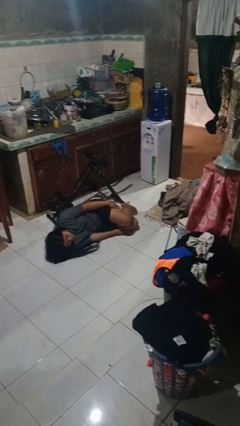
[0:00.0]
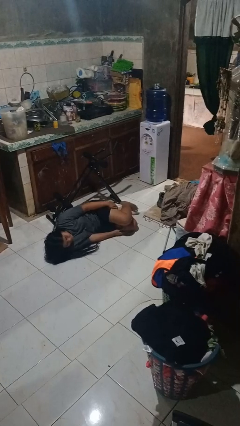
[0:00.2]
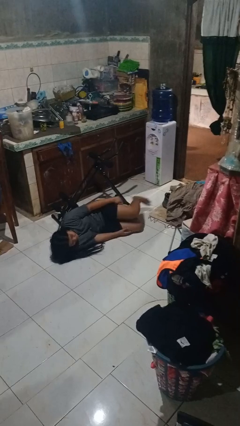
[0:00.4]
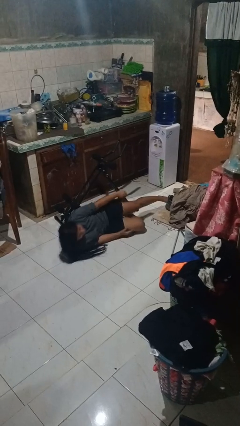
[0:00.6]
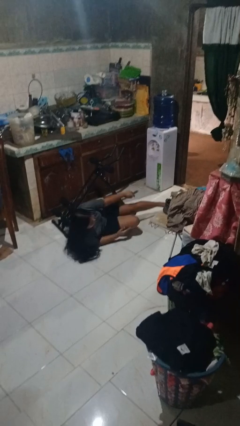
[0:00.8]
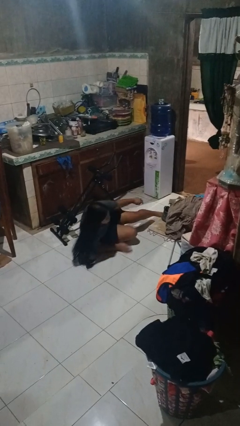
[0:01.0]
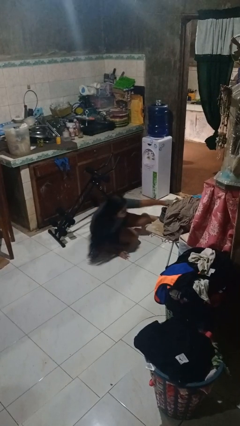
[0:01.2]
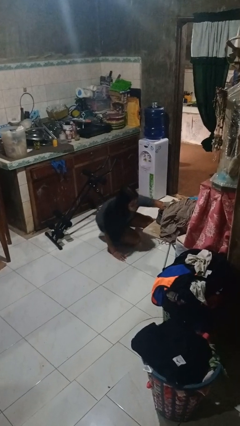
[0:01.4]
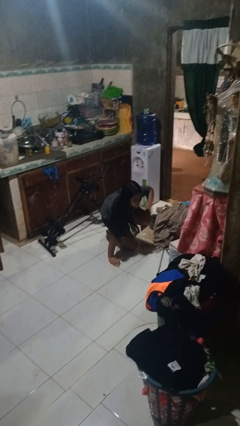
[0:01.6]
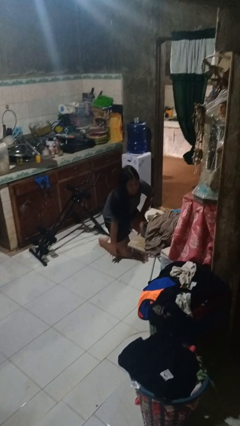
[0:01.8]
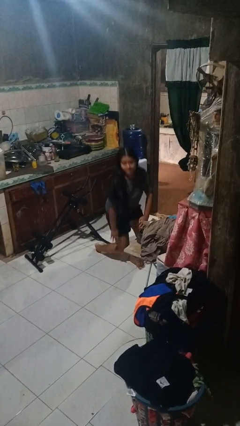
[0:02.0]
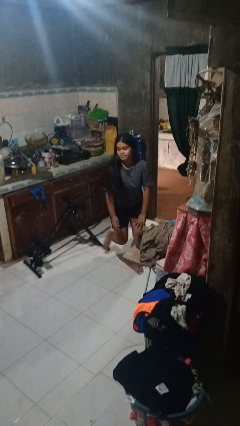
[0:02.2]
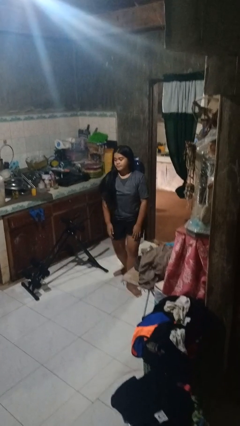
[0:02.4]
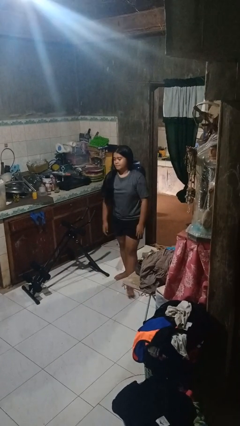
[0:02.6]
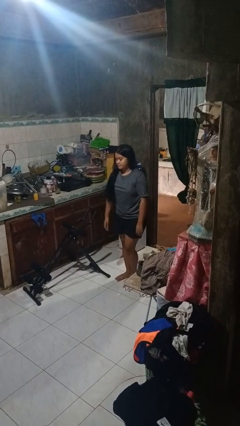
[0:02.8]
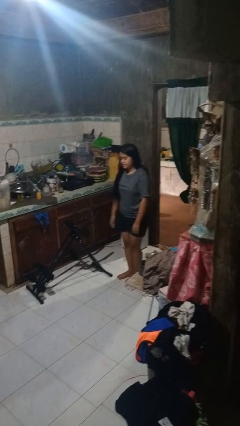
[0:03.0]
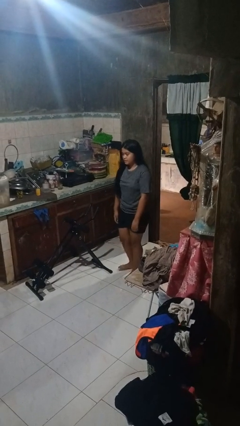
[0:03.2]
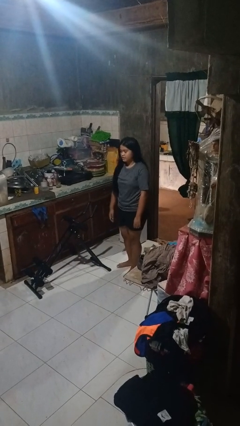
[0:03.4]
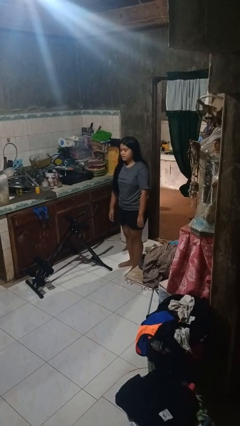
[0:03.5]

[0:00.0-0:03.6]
person stands up from floor

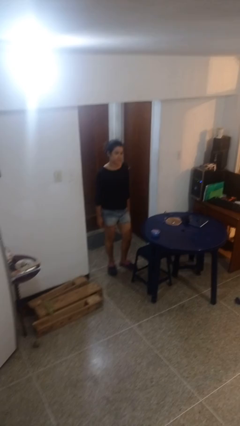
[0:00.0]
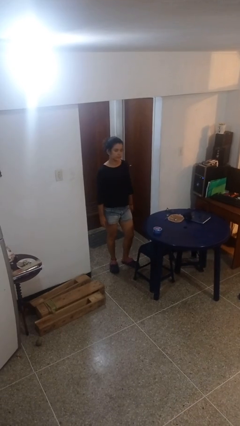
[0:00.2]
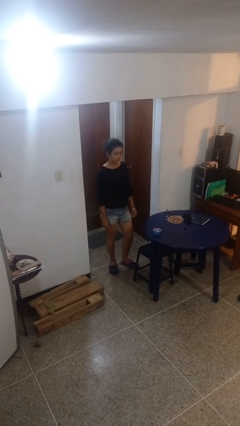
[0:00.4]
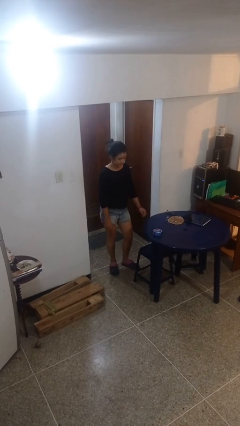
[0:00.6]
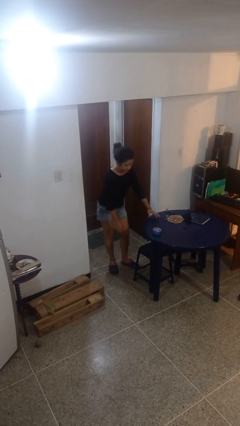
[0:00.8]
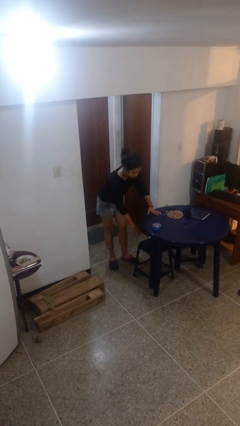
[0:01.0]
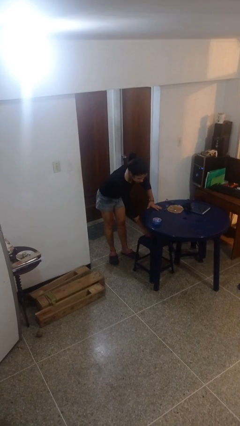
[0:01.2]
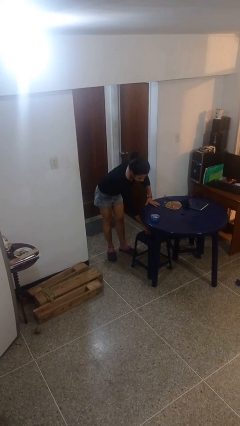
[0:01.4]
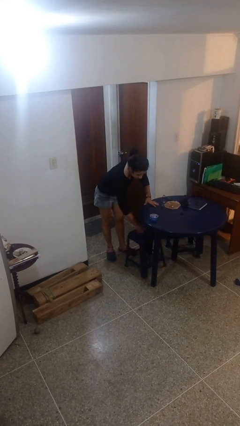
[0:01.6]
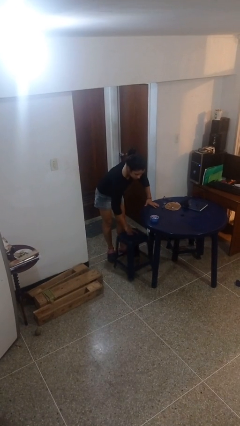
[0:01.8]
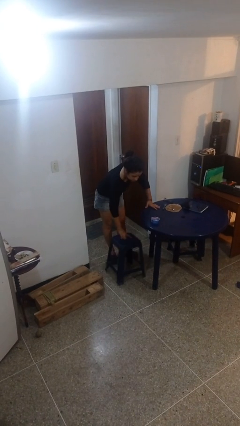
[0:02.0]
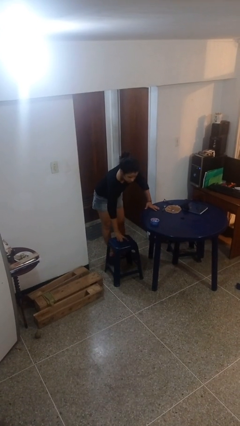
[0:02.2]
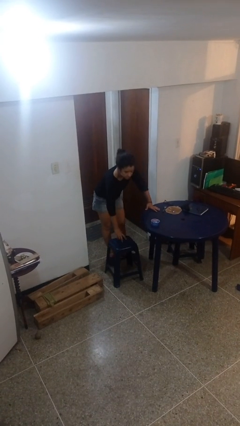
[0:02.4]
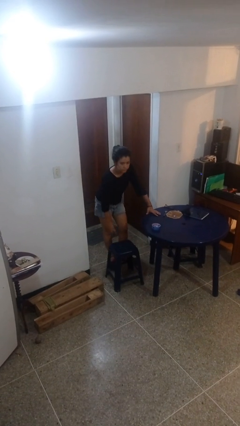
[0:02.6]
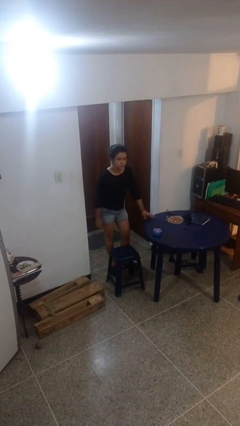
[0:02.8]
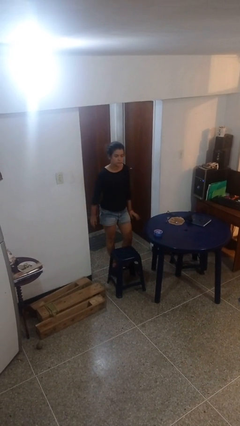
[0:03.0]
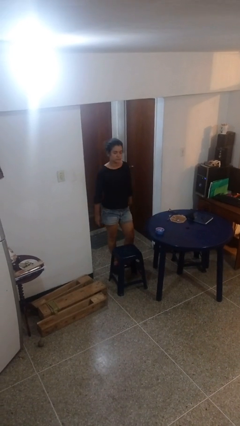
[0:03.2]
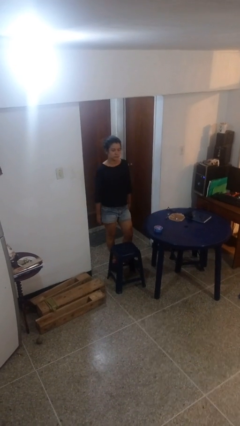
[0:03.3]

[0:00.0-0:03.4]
person pulls out chair

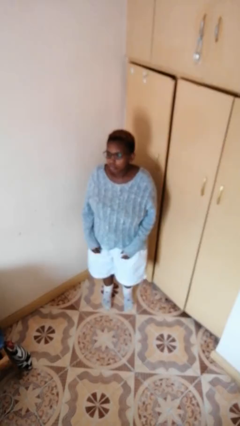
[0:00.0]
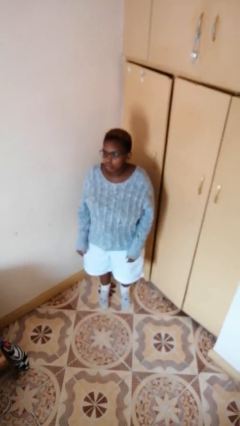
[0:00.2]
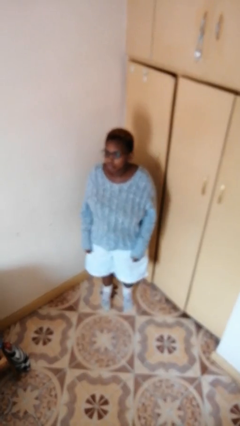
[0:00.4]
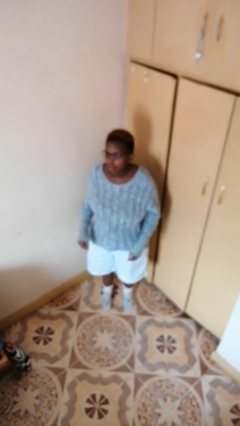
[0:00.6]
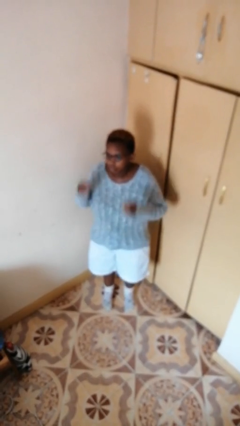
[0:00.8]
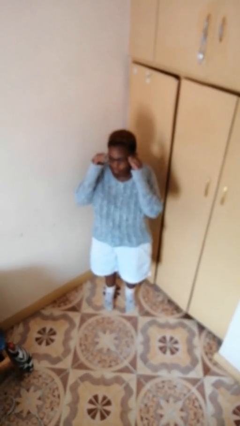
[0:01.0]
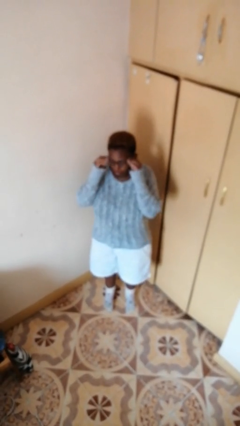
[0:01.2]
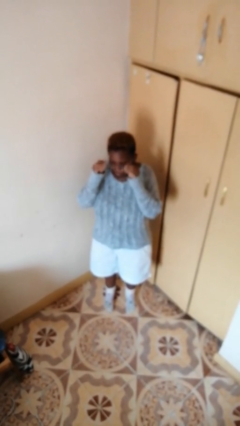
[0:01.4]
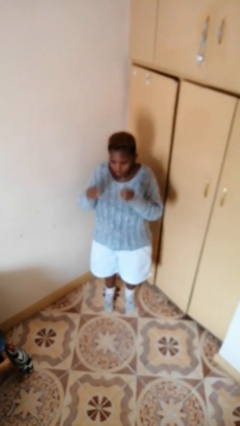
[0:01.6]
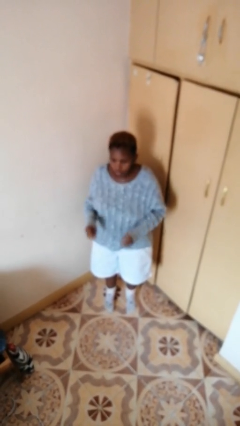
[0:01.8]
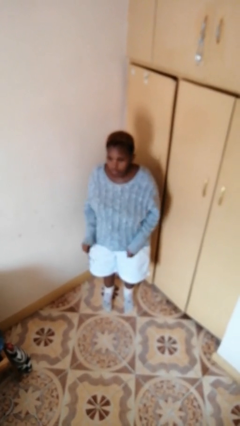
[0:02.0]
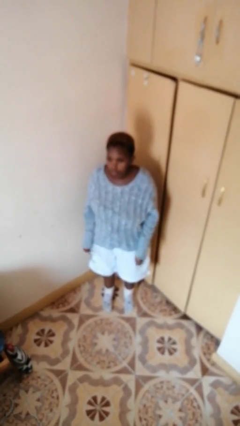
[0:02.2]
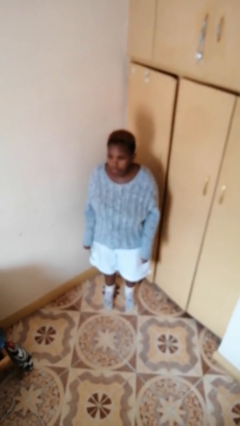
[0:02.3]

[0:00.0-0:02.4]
person takes off glasses

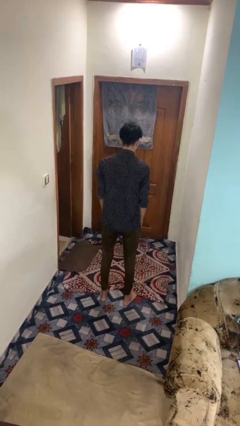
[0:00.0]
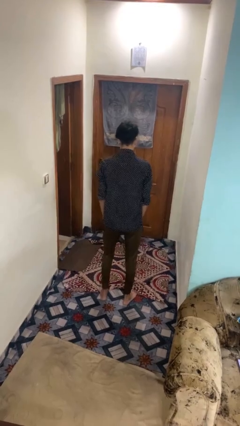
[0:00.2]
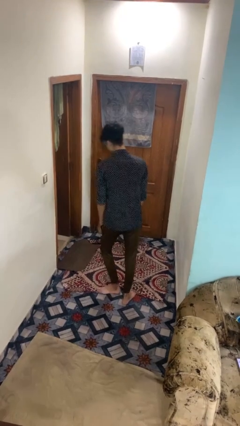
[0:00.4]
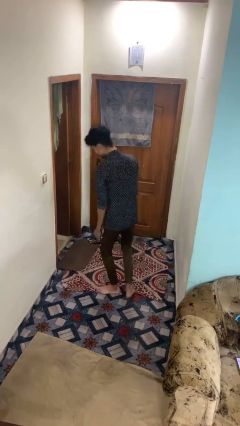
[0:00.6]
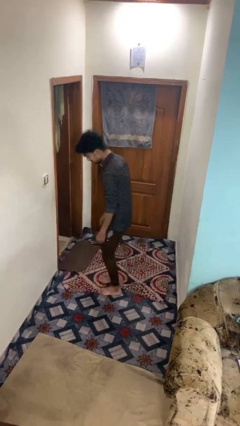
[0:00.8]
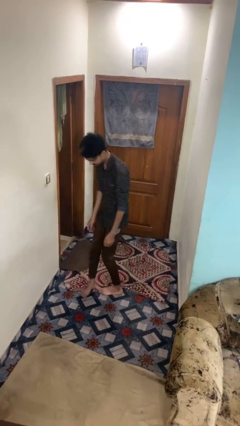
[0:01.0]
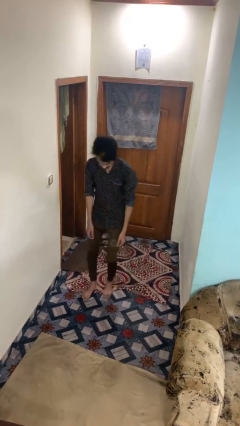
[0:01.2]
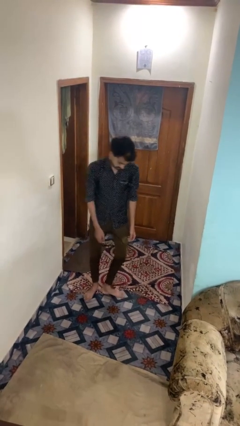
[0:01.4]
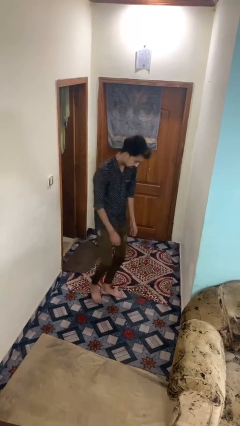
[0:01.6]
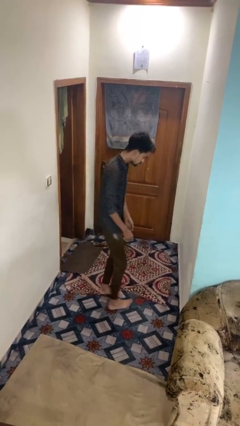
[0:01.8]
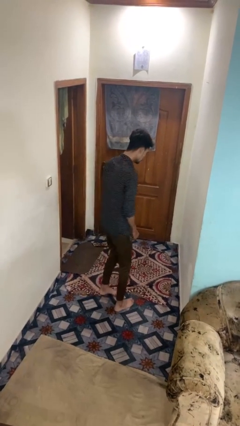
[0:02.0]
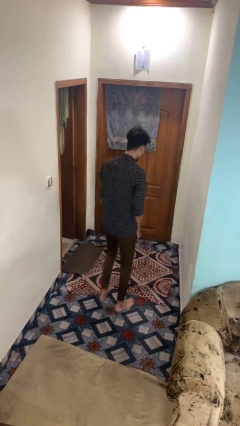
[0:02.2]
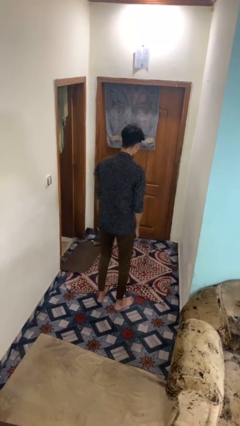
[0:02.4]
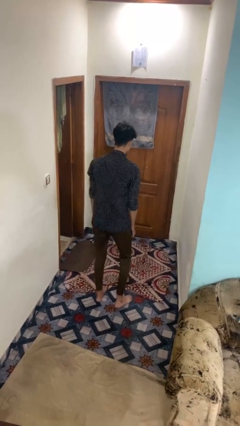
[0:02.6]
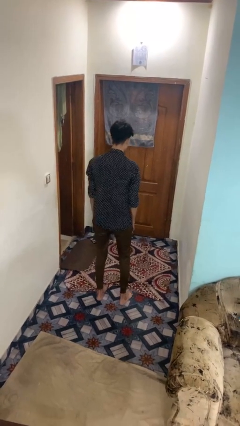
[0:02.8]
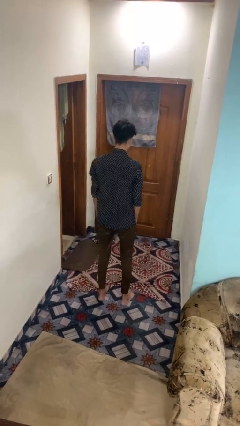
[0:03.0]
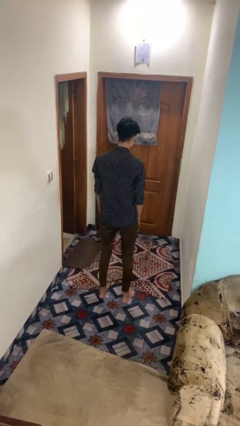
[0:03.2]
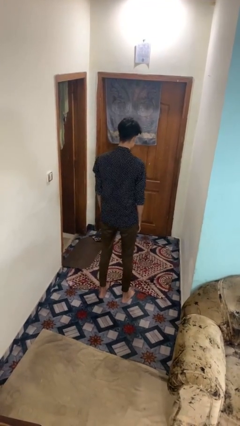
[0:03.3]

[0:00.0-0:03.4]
person twirls

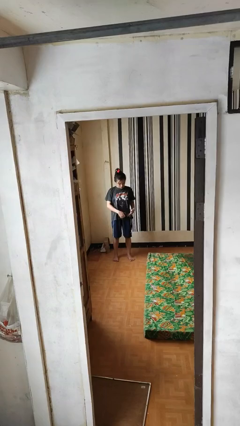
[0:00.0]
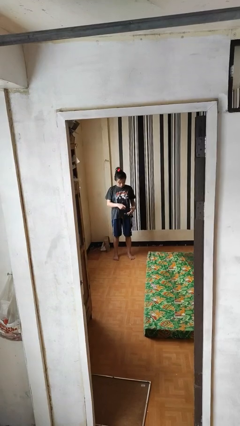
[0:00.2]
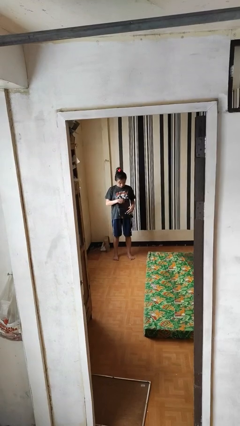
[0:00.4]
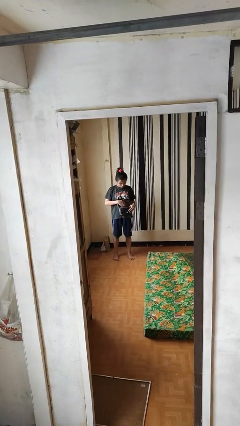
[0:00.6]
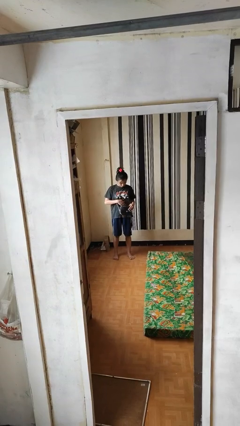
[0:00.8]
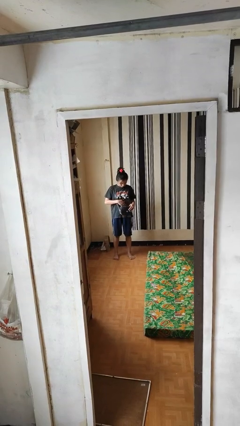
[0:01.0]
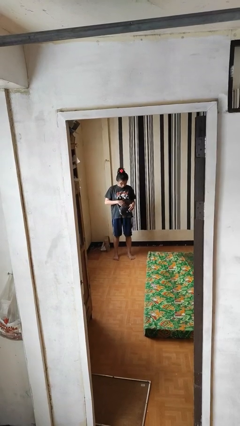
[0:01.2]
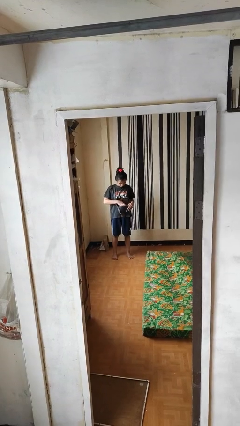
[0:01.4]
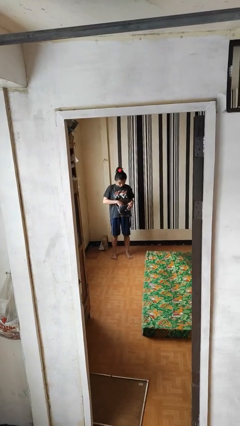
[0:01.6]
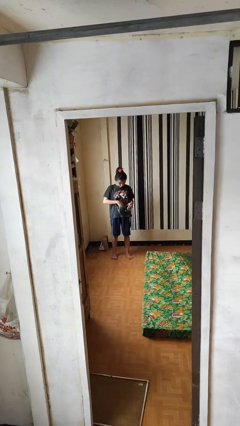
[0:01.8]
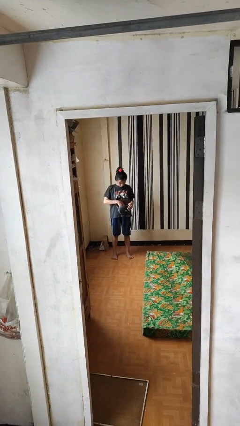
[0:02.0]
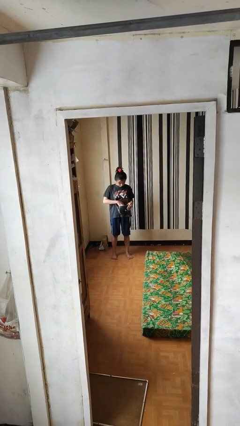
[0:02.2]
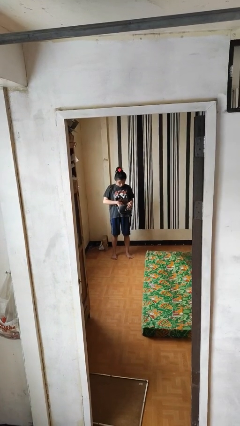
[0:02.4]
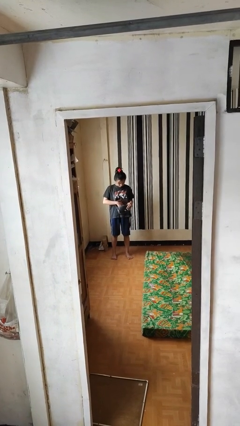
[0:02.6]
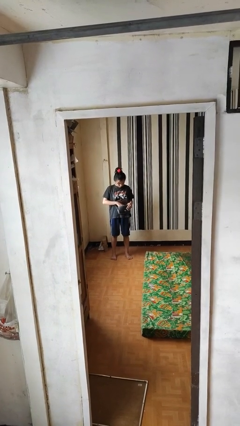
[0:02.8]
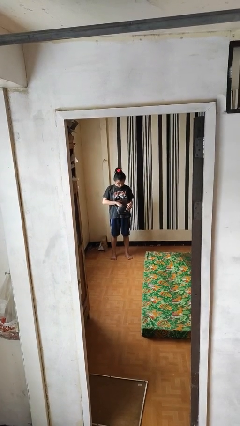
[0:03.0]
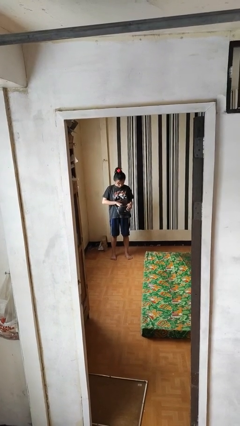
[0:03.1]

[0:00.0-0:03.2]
person searches in purse

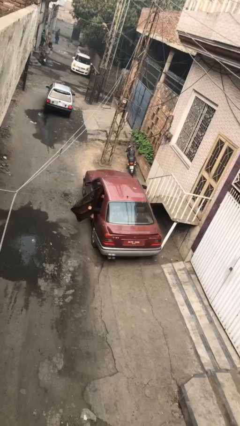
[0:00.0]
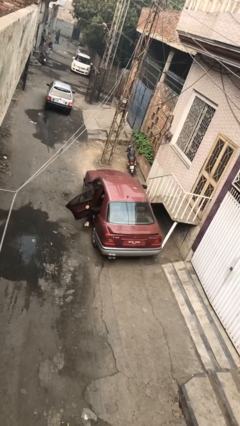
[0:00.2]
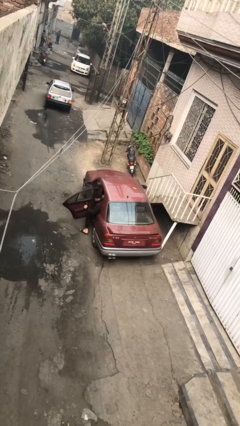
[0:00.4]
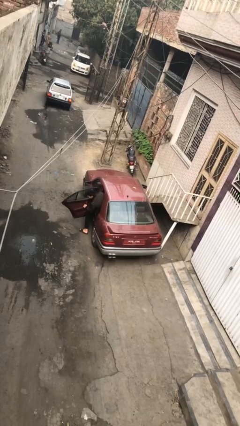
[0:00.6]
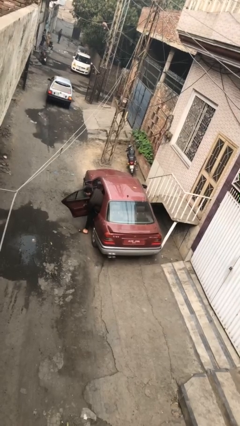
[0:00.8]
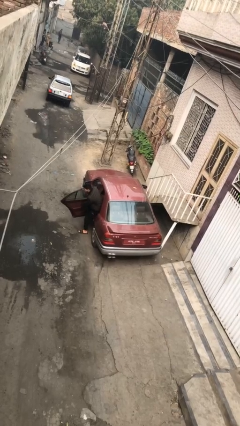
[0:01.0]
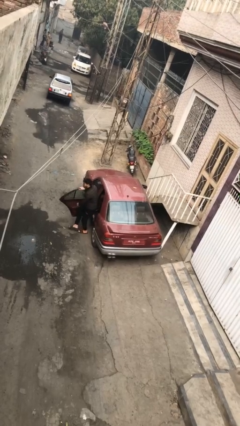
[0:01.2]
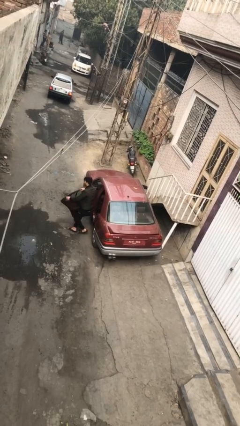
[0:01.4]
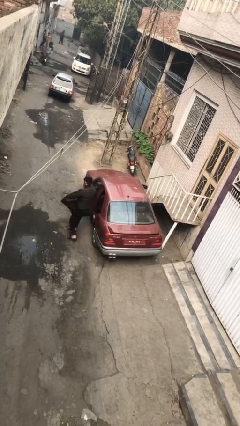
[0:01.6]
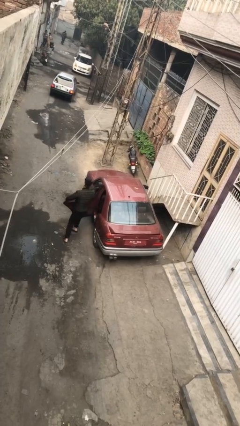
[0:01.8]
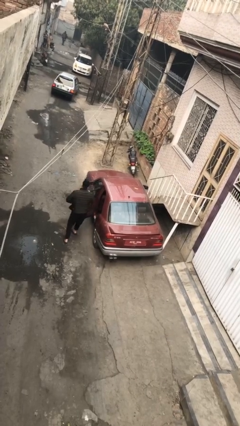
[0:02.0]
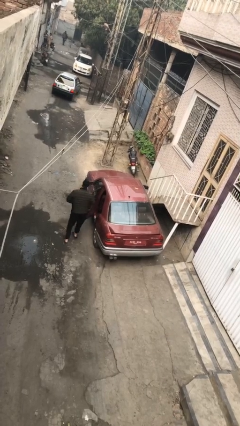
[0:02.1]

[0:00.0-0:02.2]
car drops off person
